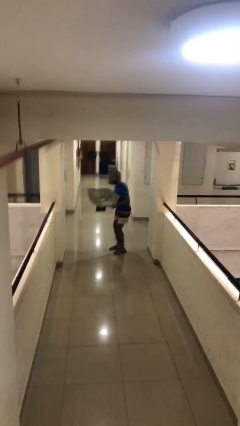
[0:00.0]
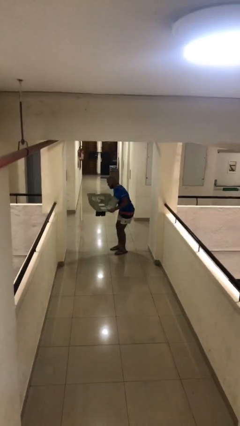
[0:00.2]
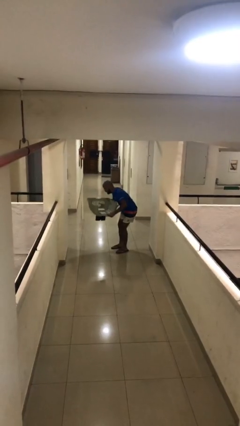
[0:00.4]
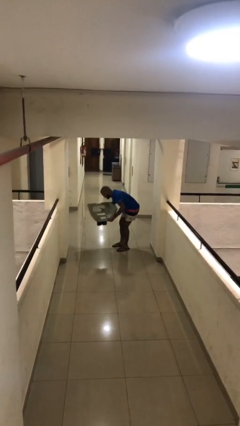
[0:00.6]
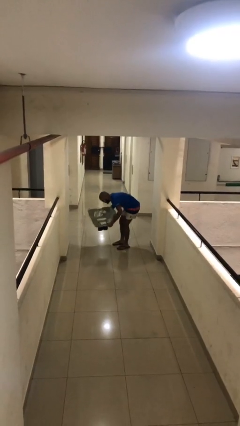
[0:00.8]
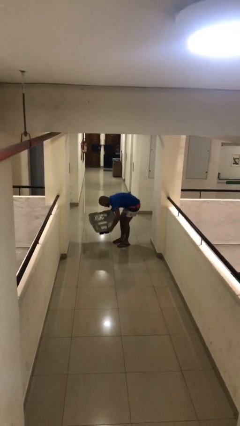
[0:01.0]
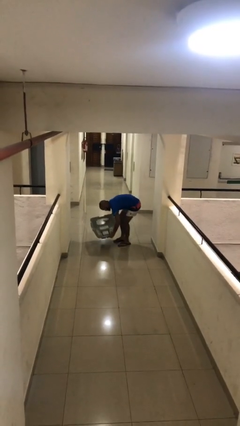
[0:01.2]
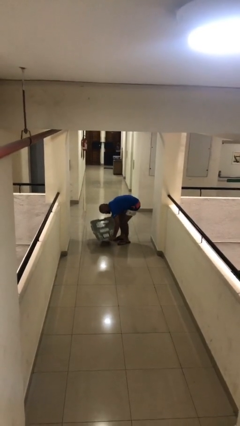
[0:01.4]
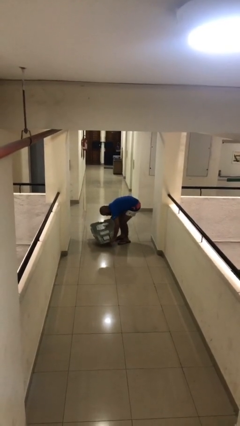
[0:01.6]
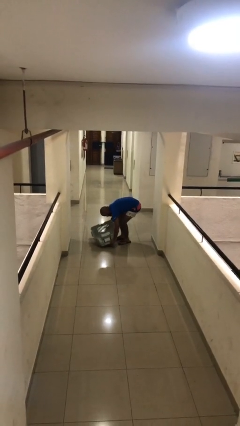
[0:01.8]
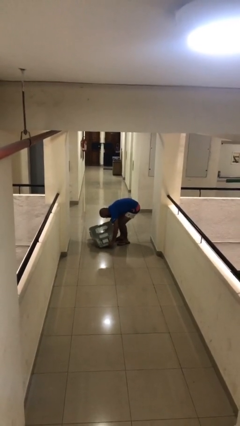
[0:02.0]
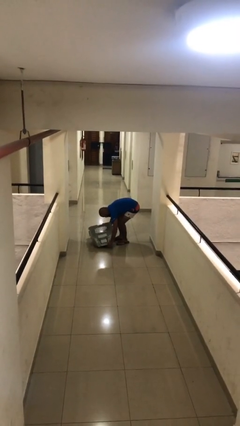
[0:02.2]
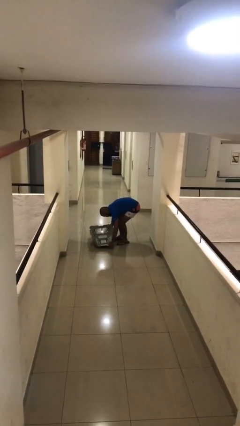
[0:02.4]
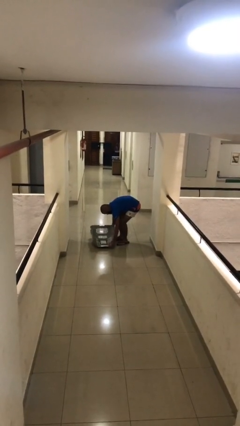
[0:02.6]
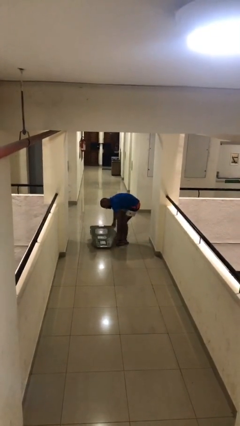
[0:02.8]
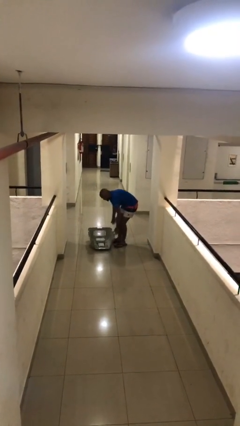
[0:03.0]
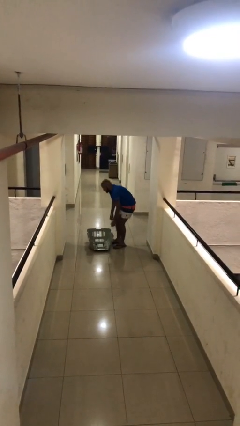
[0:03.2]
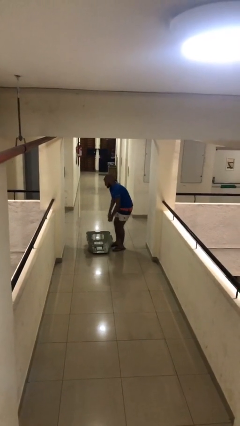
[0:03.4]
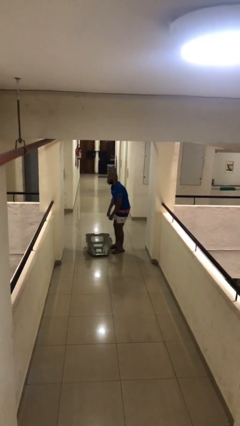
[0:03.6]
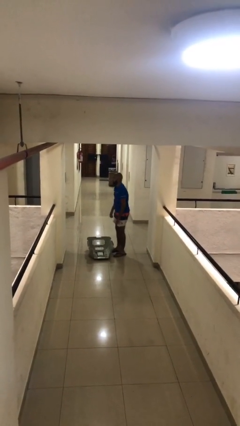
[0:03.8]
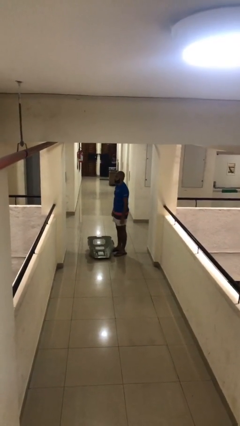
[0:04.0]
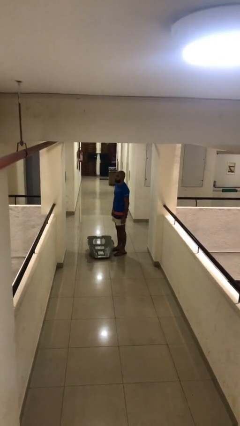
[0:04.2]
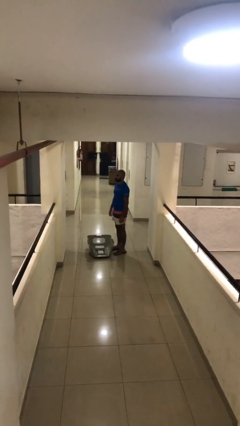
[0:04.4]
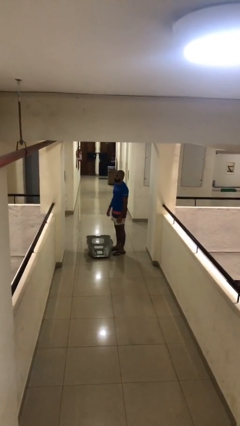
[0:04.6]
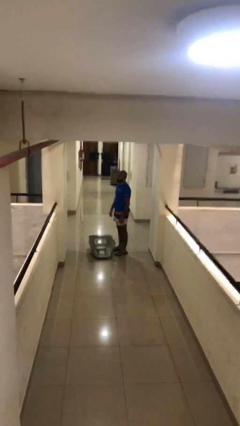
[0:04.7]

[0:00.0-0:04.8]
person puts down object on floor

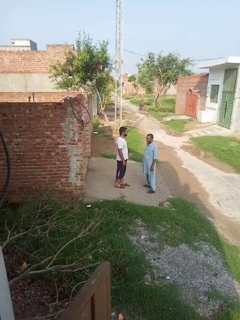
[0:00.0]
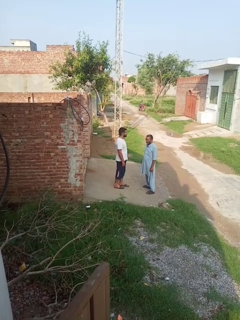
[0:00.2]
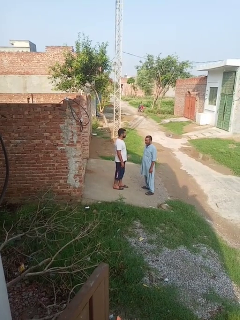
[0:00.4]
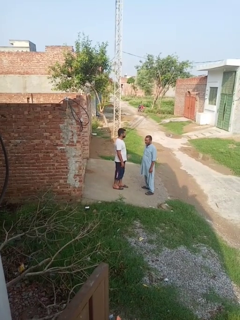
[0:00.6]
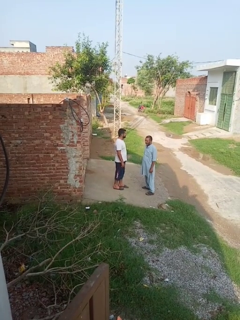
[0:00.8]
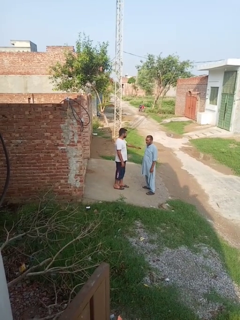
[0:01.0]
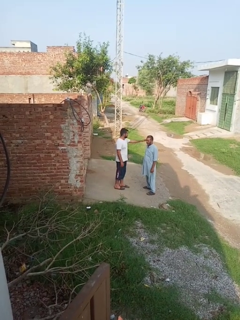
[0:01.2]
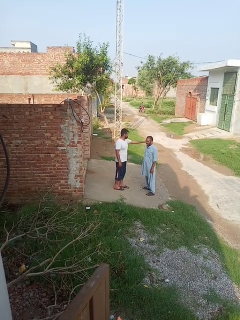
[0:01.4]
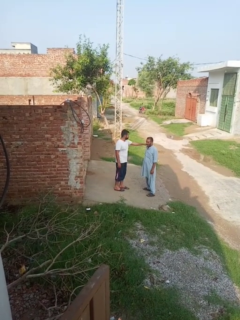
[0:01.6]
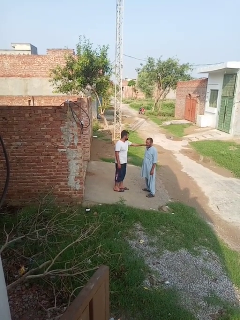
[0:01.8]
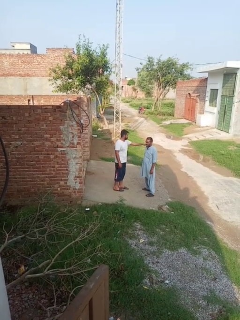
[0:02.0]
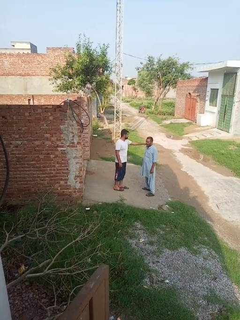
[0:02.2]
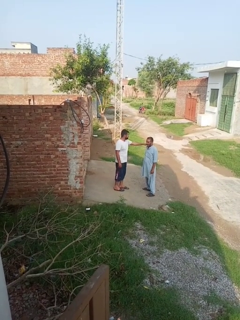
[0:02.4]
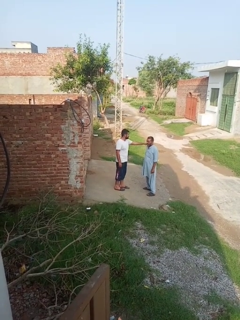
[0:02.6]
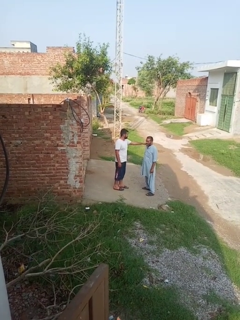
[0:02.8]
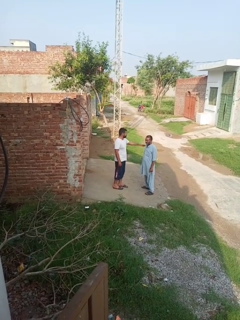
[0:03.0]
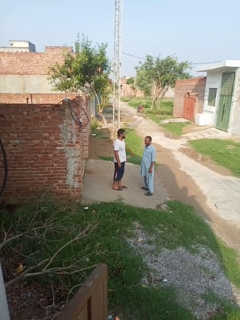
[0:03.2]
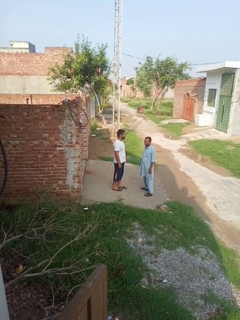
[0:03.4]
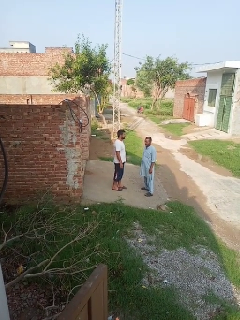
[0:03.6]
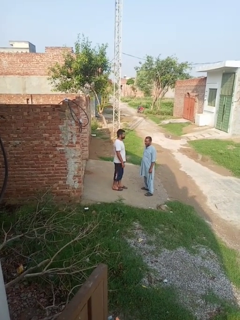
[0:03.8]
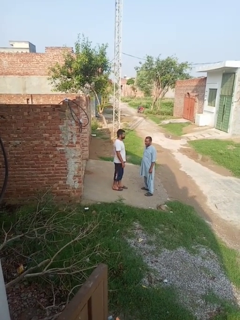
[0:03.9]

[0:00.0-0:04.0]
person pounds shoulders of person

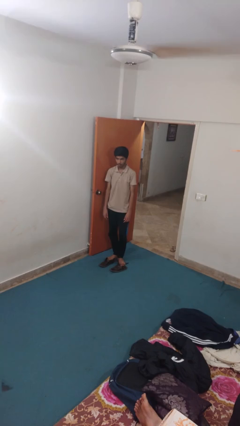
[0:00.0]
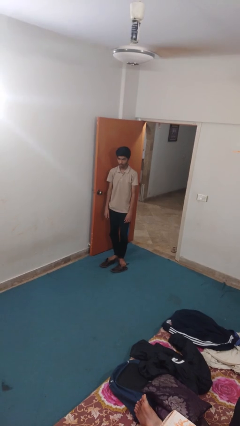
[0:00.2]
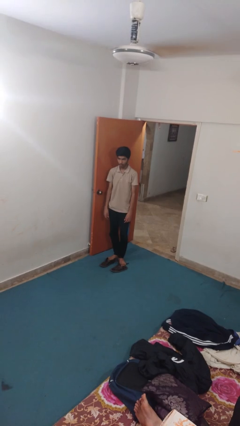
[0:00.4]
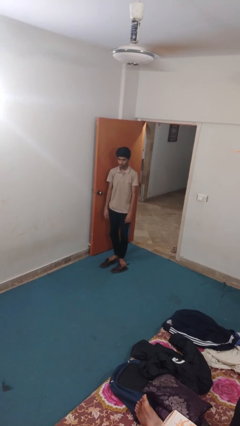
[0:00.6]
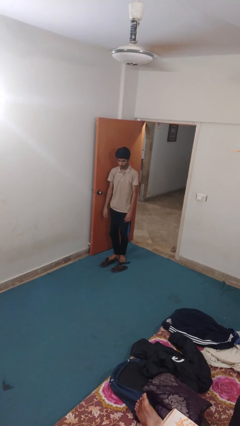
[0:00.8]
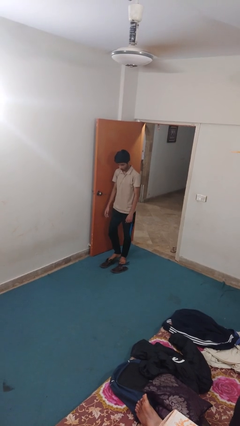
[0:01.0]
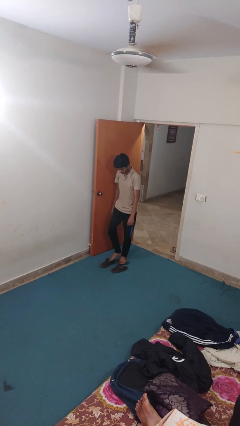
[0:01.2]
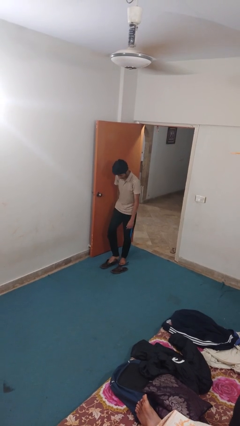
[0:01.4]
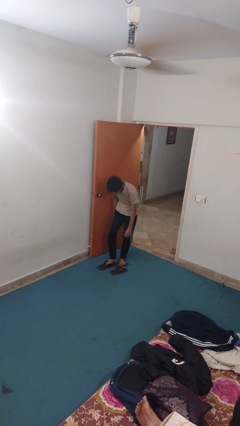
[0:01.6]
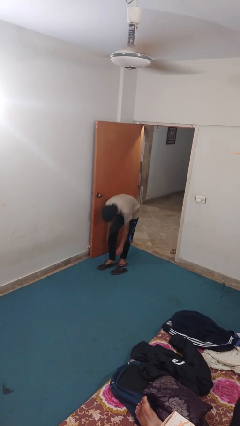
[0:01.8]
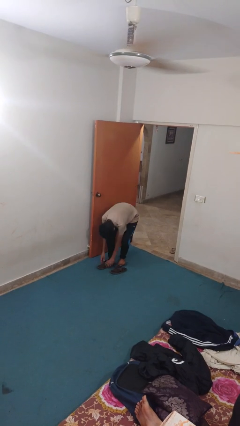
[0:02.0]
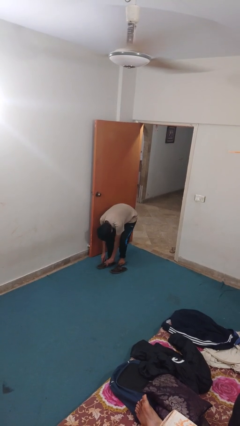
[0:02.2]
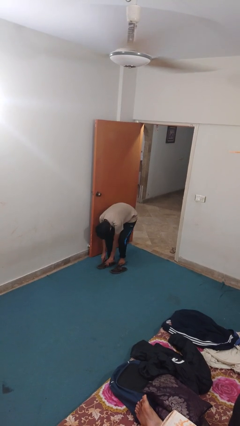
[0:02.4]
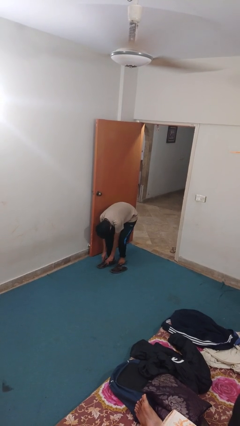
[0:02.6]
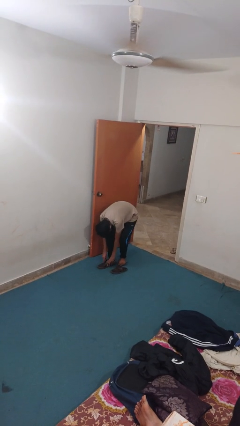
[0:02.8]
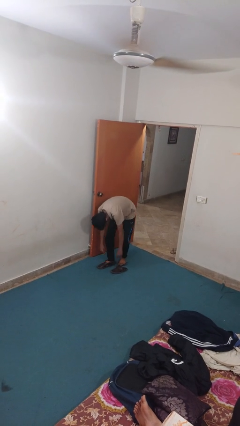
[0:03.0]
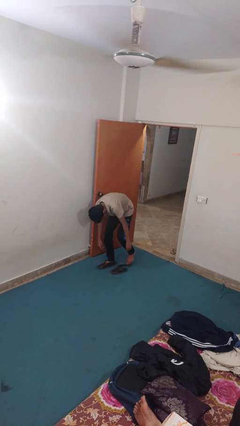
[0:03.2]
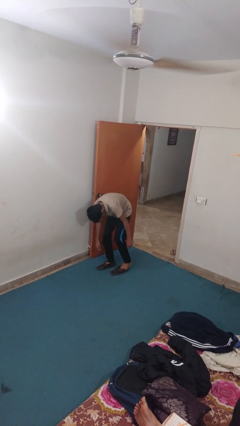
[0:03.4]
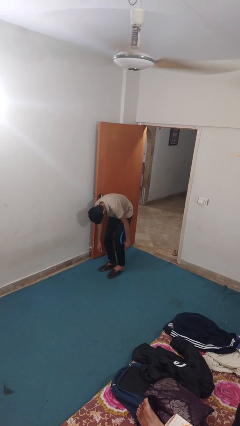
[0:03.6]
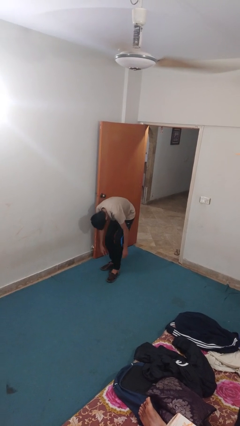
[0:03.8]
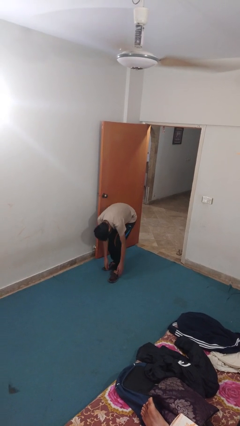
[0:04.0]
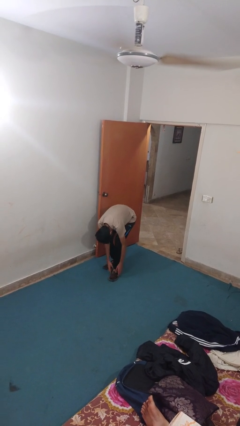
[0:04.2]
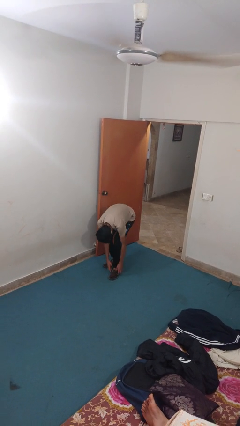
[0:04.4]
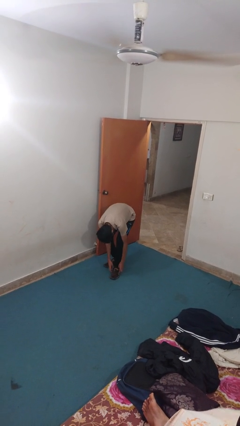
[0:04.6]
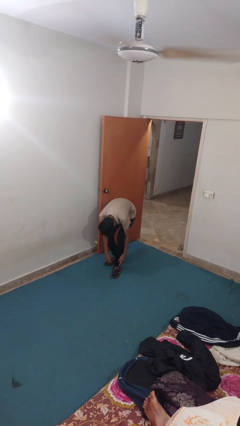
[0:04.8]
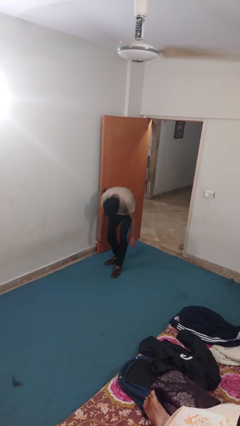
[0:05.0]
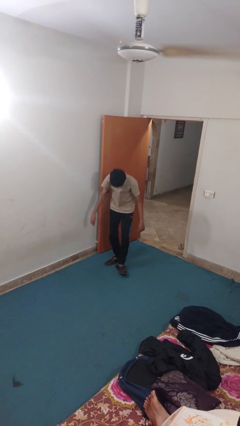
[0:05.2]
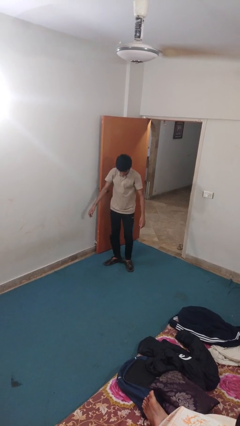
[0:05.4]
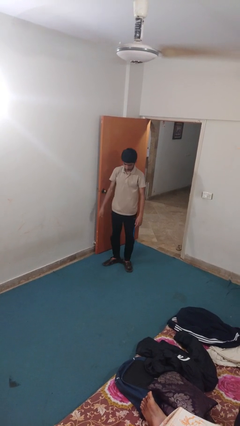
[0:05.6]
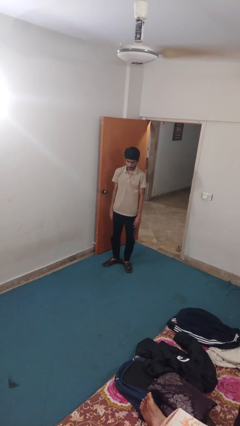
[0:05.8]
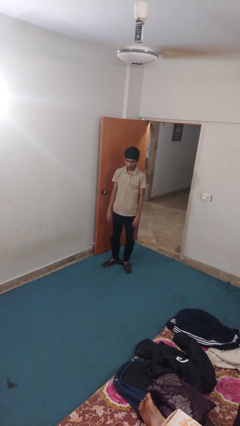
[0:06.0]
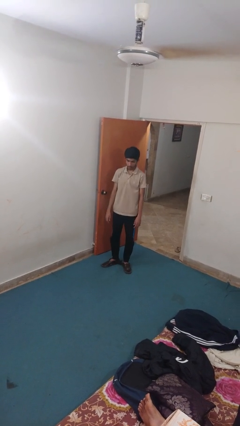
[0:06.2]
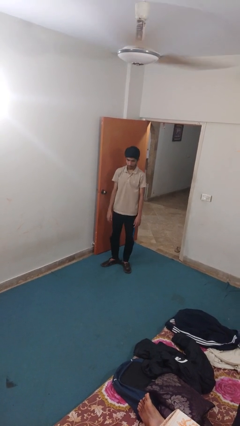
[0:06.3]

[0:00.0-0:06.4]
person puts on shoes

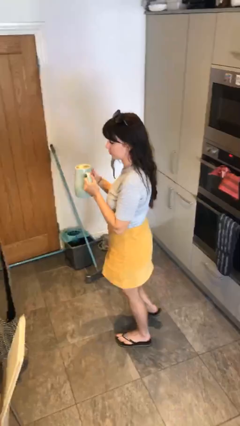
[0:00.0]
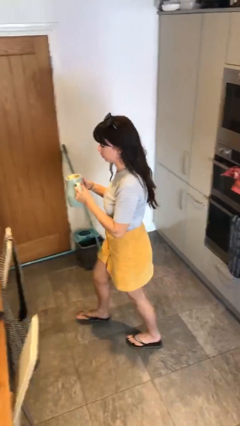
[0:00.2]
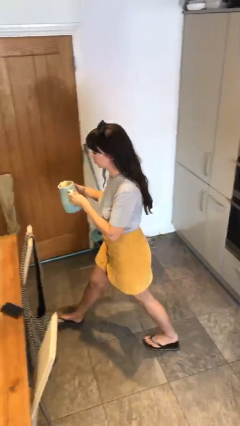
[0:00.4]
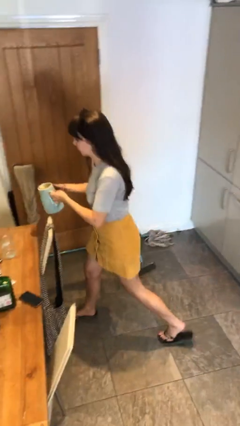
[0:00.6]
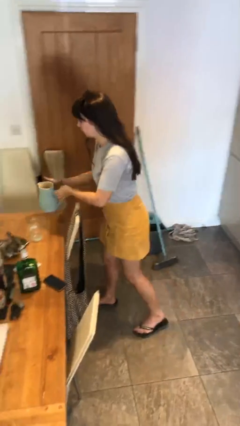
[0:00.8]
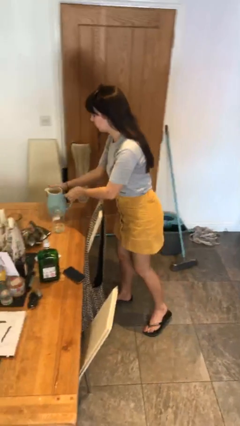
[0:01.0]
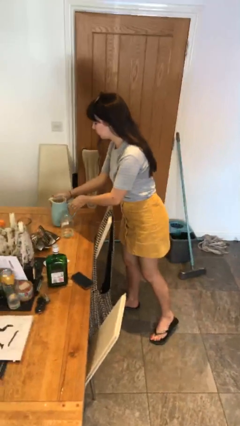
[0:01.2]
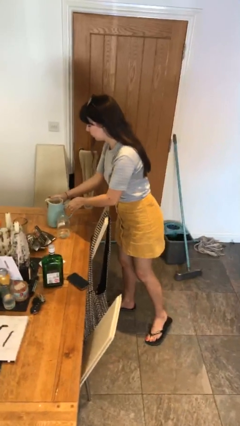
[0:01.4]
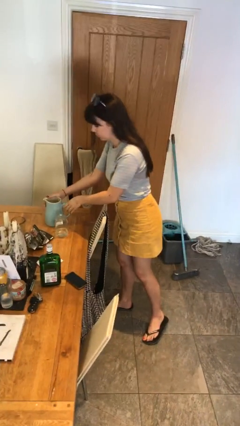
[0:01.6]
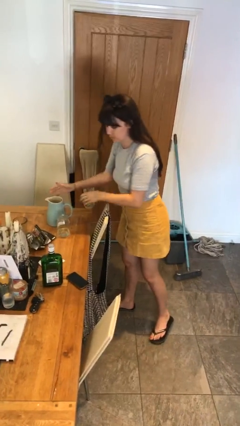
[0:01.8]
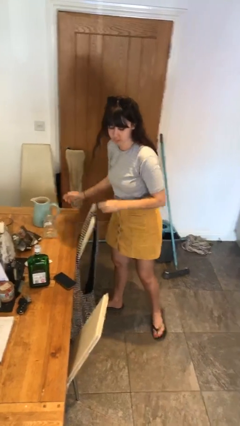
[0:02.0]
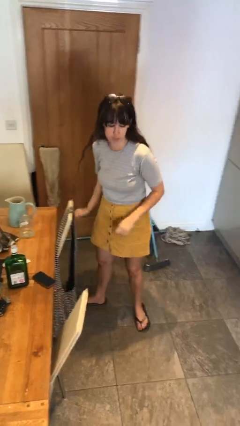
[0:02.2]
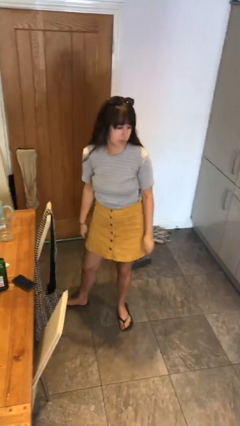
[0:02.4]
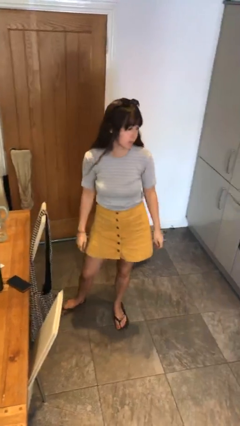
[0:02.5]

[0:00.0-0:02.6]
person puts down object on table

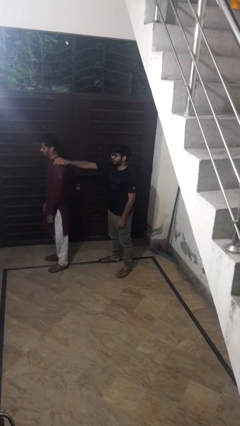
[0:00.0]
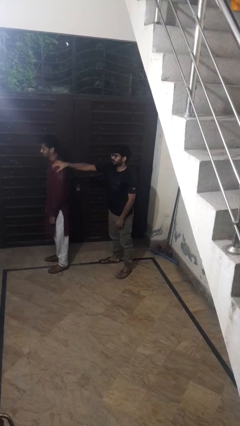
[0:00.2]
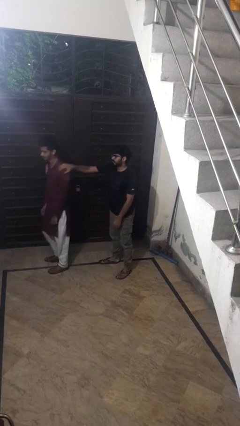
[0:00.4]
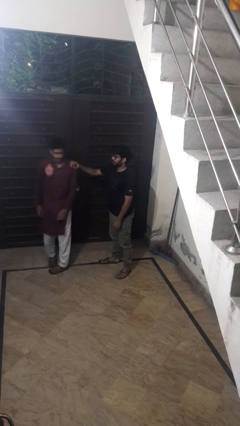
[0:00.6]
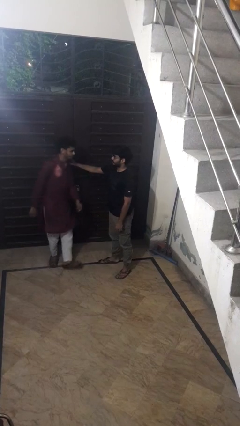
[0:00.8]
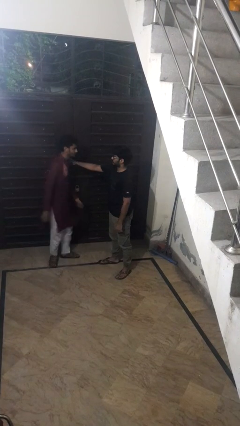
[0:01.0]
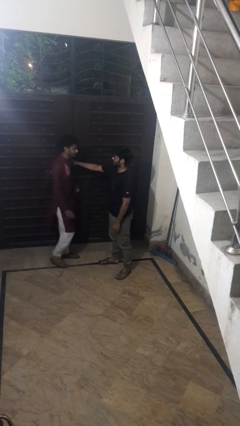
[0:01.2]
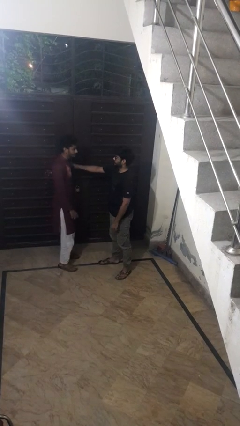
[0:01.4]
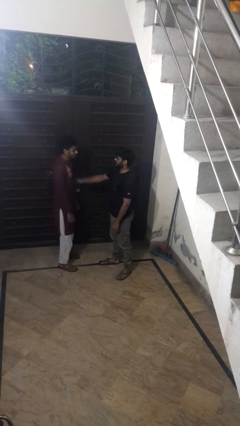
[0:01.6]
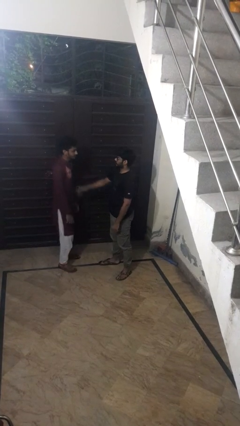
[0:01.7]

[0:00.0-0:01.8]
person spins person around
